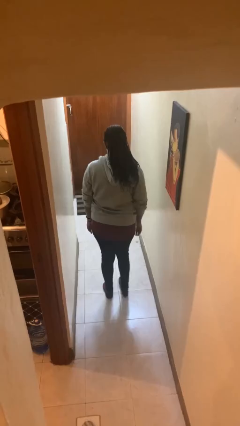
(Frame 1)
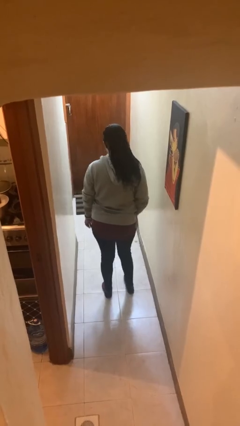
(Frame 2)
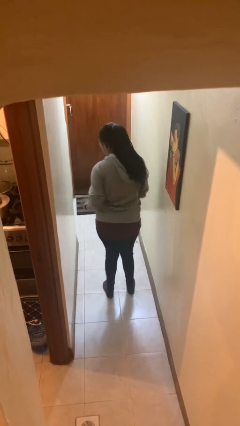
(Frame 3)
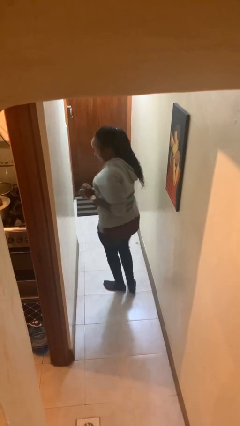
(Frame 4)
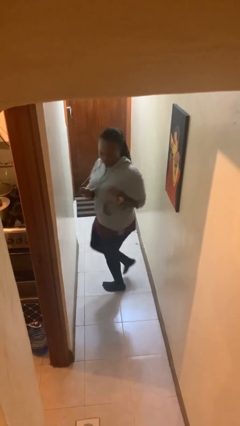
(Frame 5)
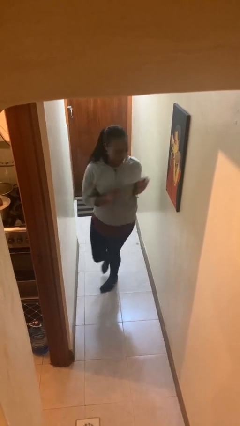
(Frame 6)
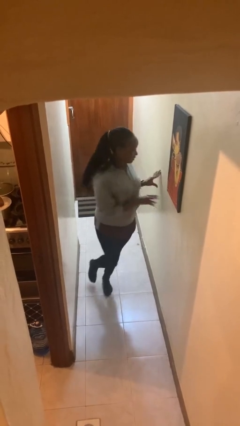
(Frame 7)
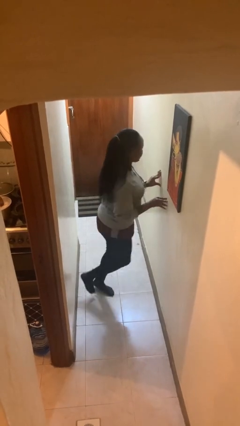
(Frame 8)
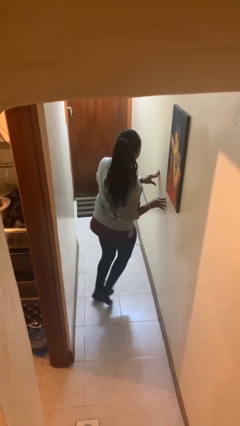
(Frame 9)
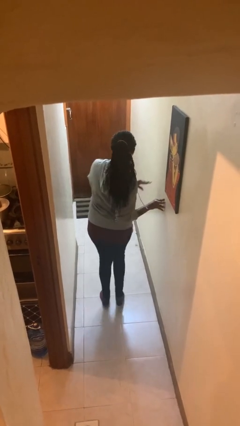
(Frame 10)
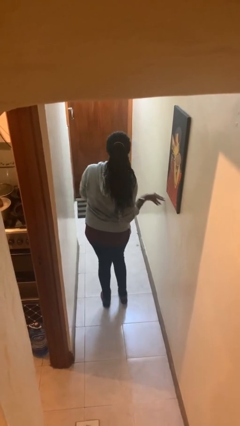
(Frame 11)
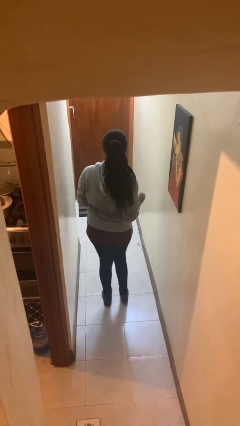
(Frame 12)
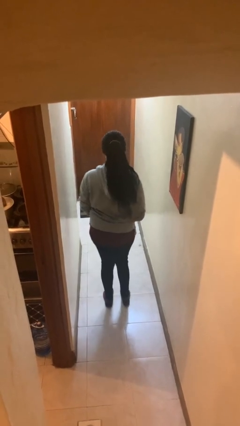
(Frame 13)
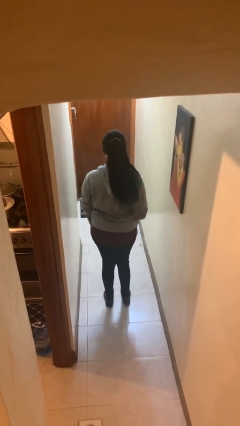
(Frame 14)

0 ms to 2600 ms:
person twirls

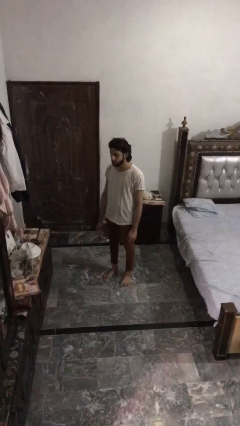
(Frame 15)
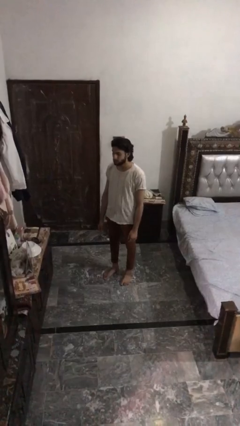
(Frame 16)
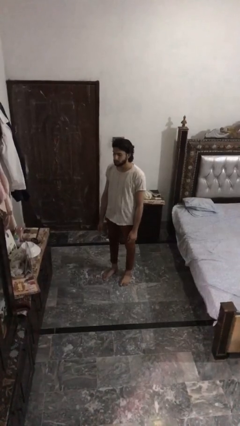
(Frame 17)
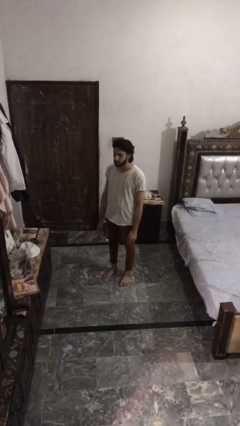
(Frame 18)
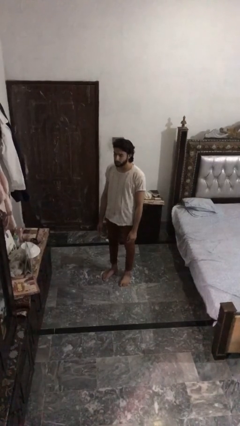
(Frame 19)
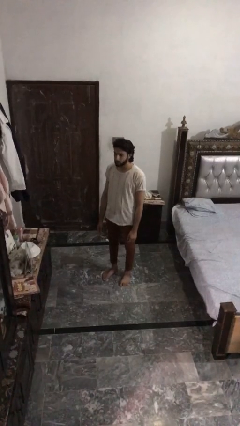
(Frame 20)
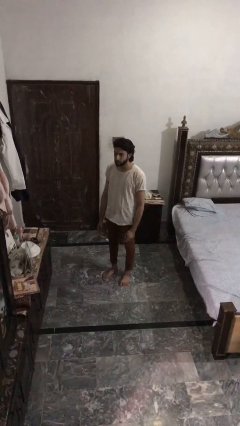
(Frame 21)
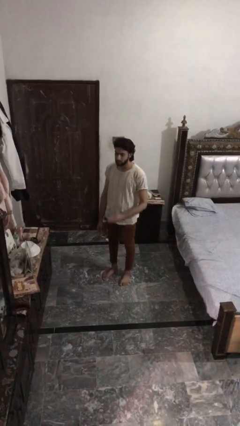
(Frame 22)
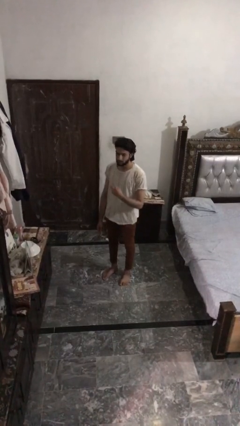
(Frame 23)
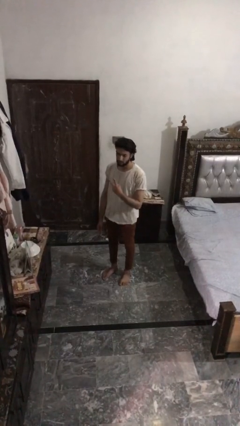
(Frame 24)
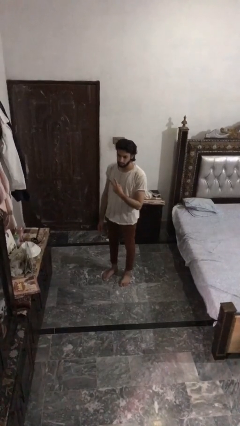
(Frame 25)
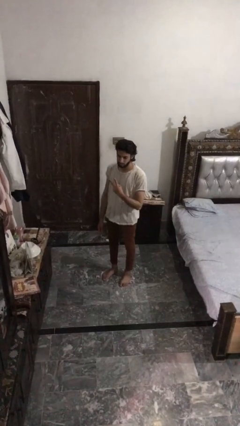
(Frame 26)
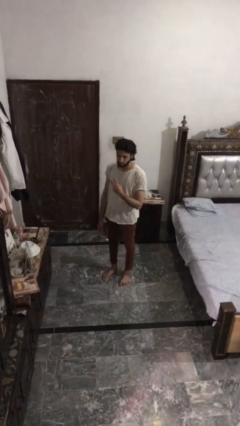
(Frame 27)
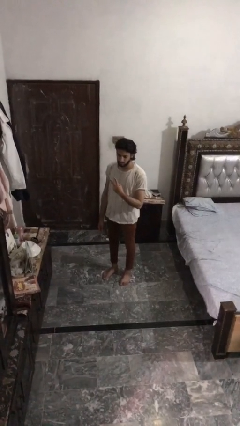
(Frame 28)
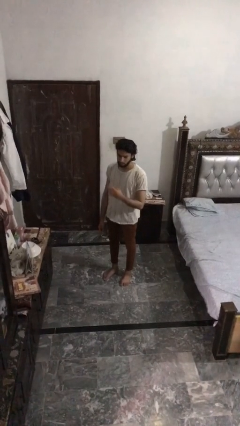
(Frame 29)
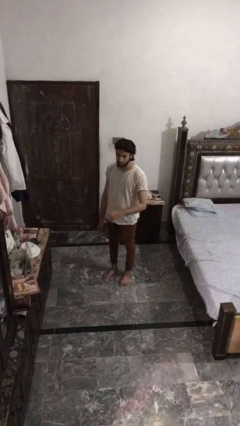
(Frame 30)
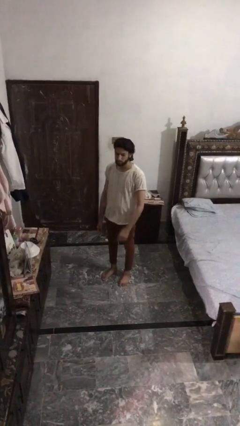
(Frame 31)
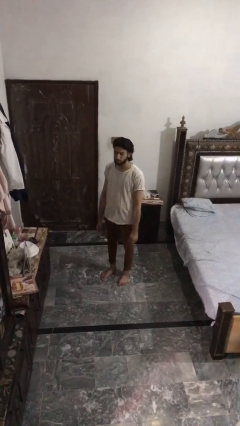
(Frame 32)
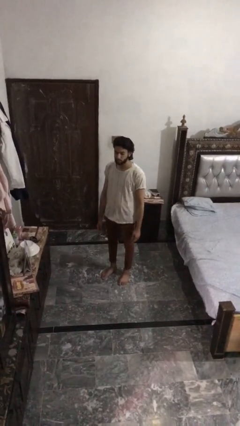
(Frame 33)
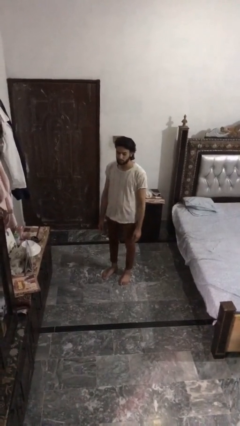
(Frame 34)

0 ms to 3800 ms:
person gestures peace

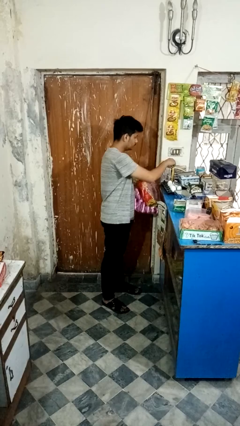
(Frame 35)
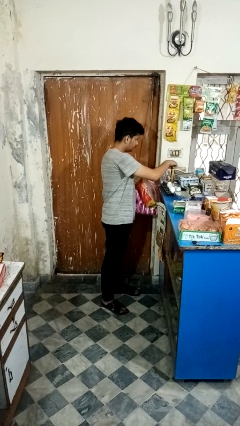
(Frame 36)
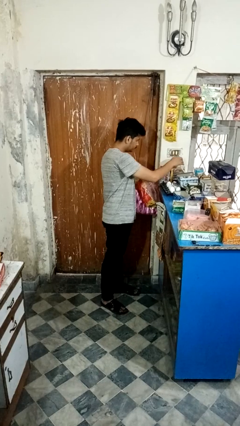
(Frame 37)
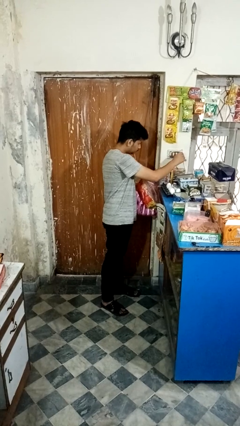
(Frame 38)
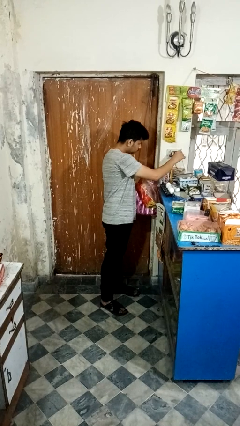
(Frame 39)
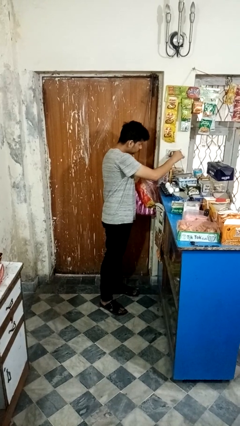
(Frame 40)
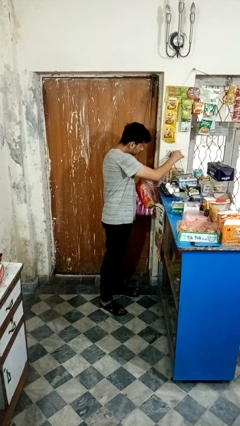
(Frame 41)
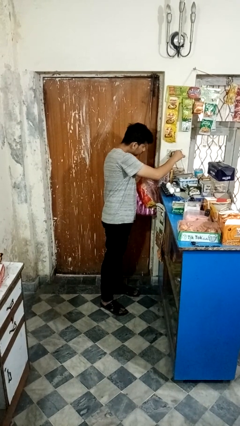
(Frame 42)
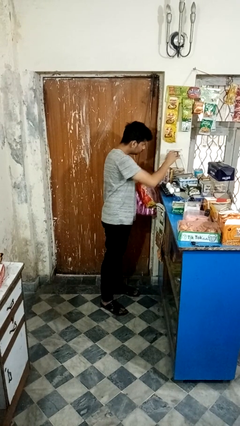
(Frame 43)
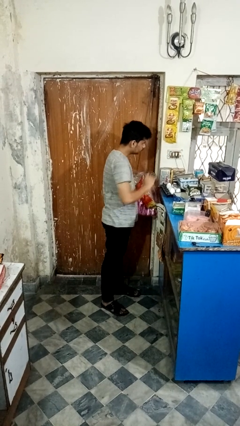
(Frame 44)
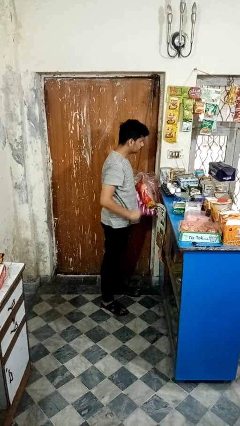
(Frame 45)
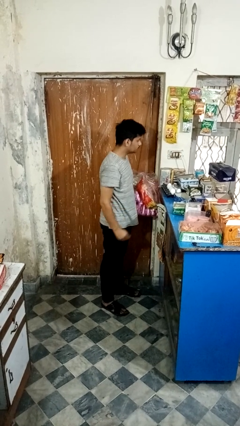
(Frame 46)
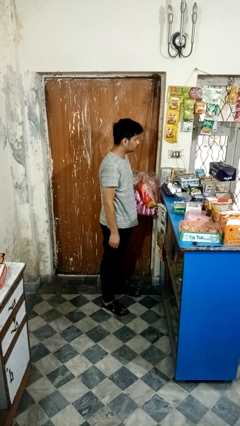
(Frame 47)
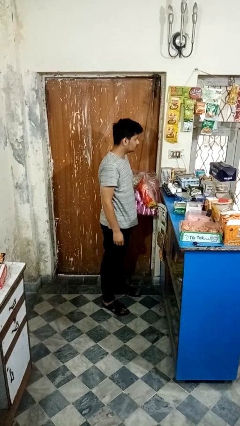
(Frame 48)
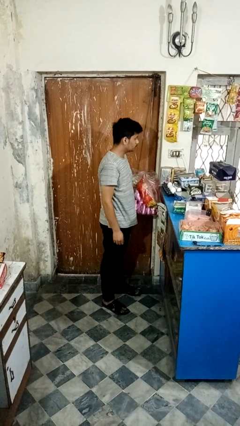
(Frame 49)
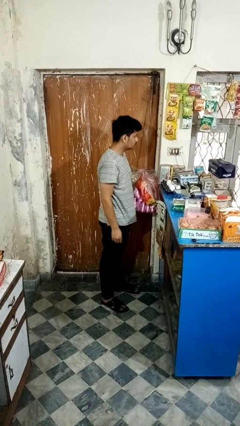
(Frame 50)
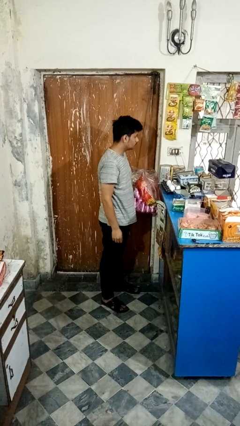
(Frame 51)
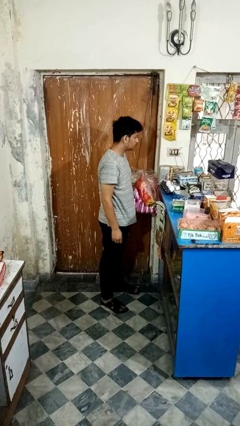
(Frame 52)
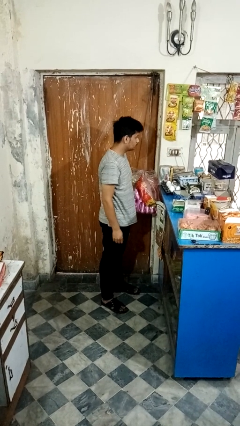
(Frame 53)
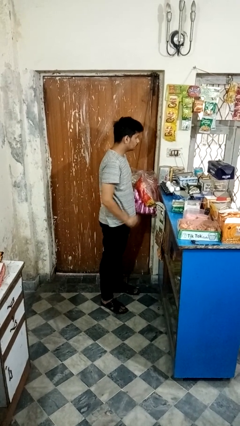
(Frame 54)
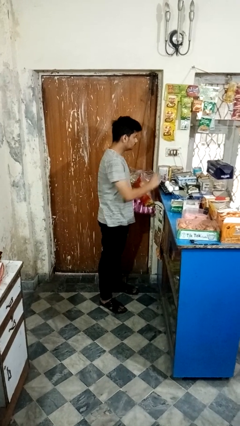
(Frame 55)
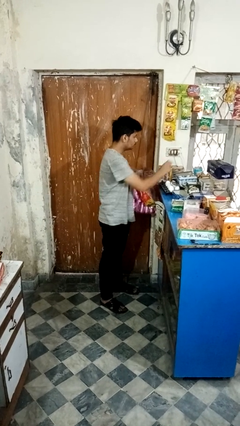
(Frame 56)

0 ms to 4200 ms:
person plugs into electrical socket

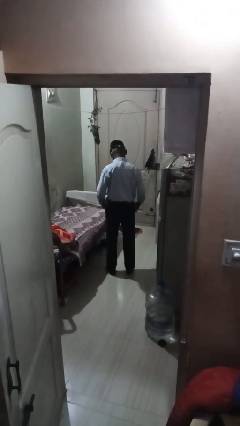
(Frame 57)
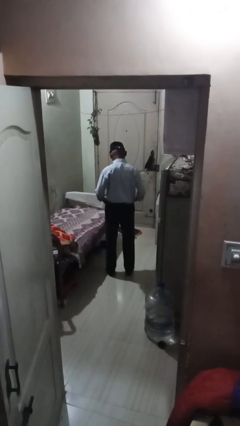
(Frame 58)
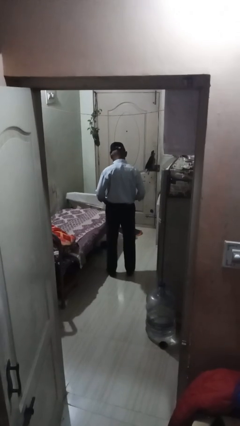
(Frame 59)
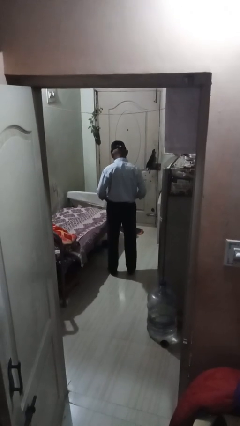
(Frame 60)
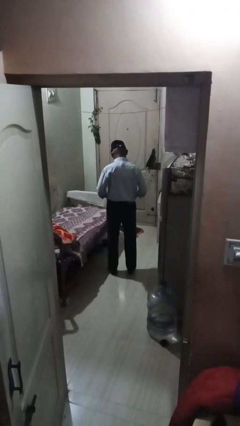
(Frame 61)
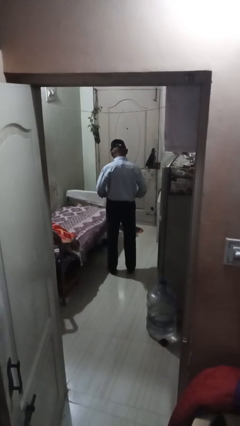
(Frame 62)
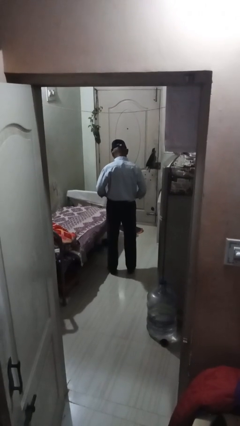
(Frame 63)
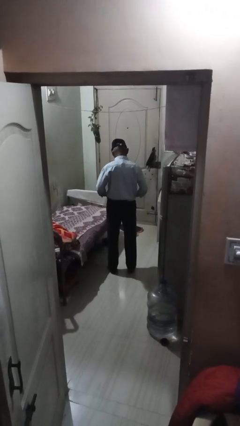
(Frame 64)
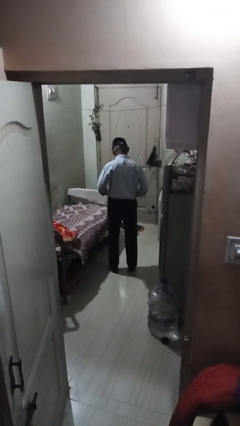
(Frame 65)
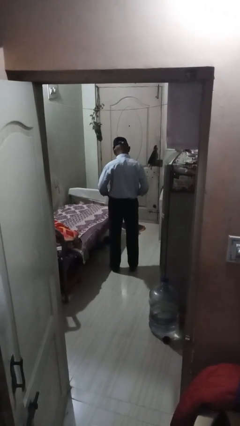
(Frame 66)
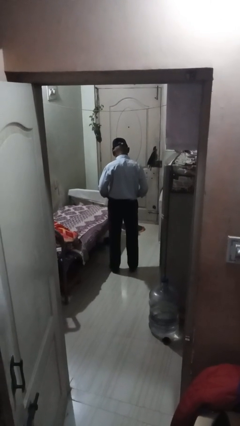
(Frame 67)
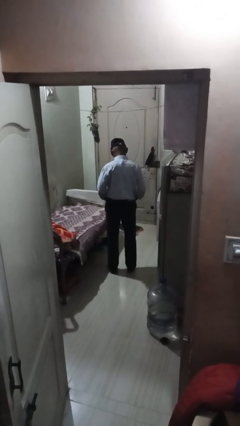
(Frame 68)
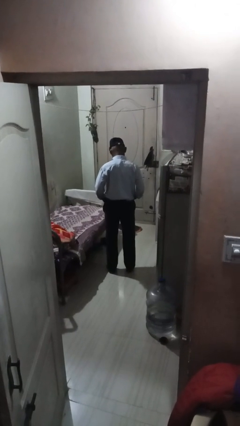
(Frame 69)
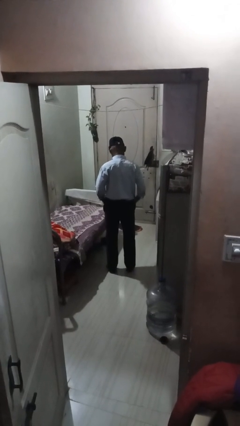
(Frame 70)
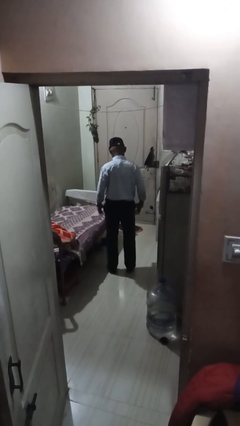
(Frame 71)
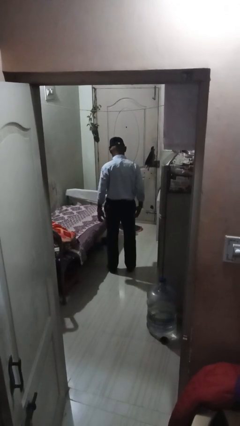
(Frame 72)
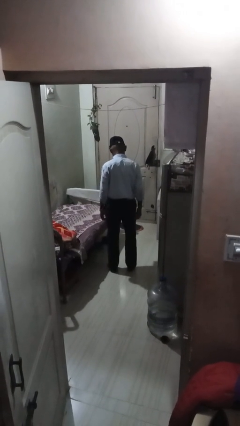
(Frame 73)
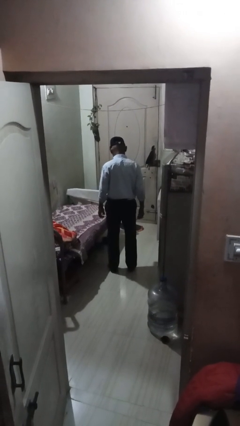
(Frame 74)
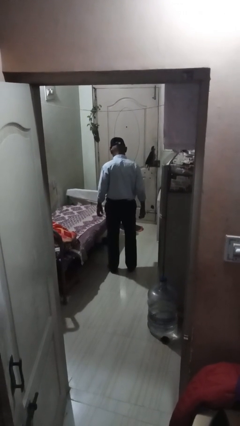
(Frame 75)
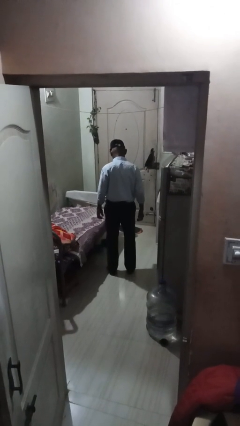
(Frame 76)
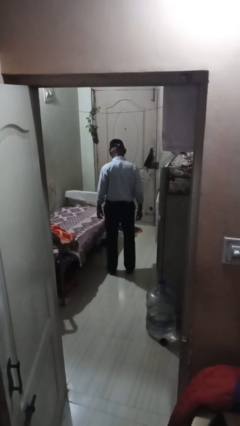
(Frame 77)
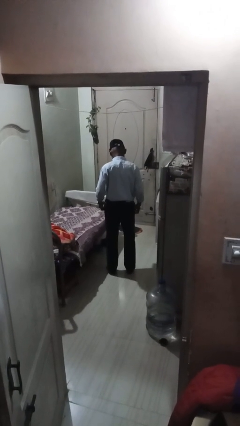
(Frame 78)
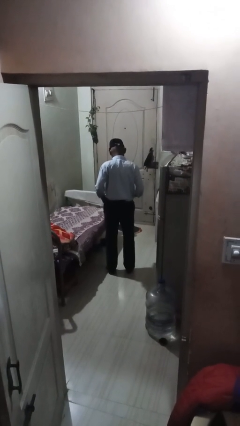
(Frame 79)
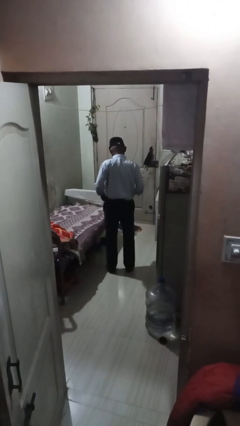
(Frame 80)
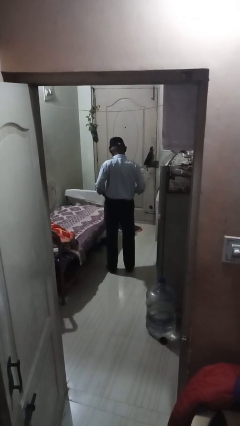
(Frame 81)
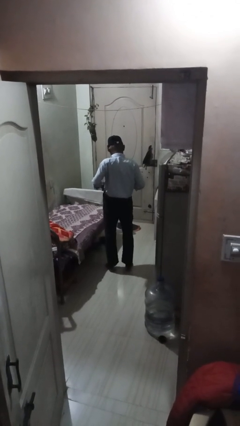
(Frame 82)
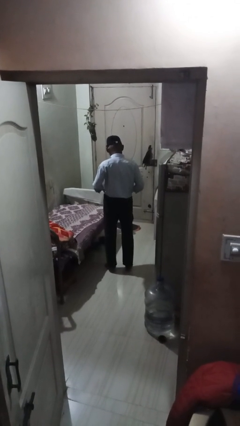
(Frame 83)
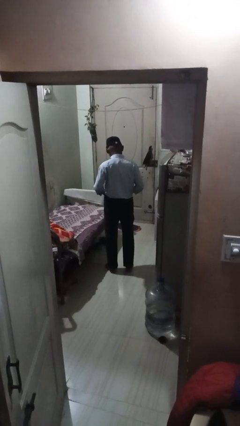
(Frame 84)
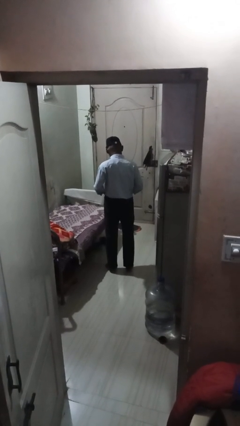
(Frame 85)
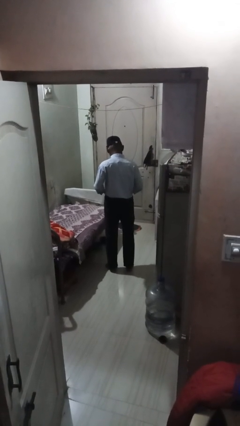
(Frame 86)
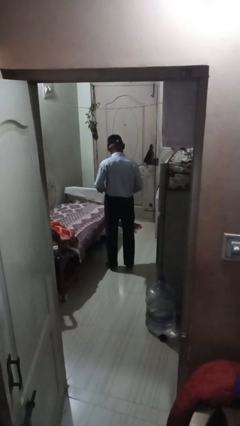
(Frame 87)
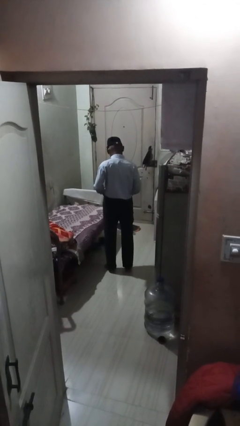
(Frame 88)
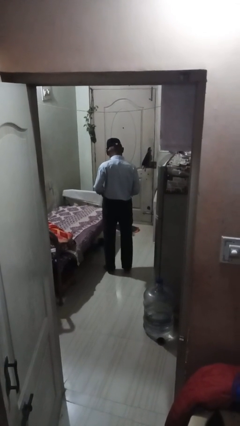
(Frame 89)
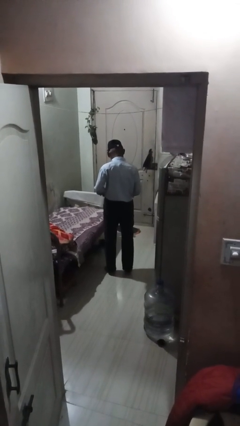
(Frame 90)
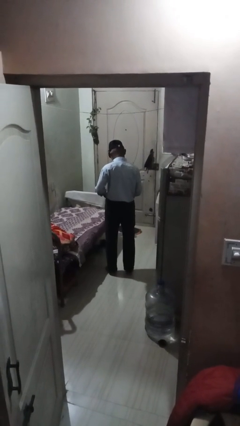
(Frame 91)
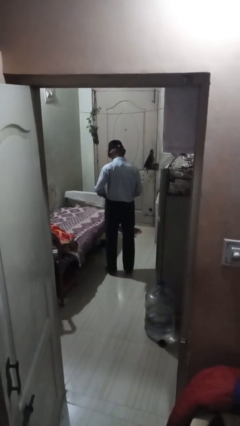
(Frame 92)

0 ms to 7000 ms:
person hikes up pants

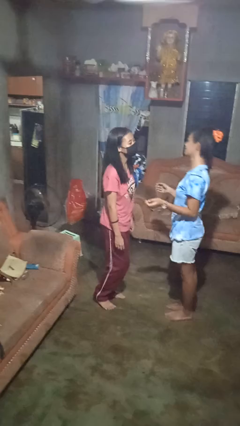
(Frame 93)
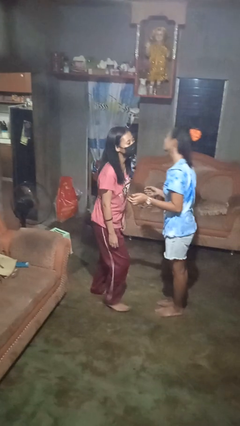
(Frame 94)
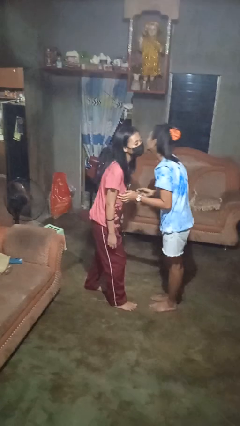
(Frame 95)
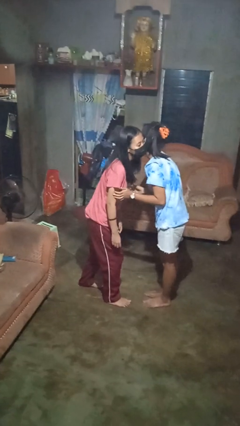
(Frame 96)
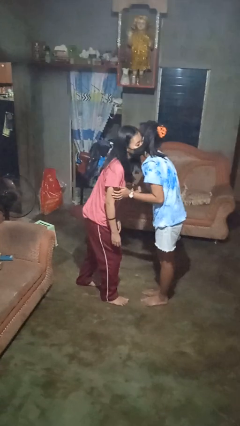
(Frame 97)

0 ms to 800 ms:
person kisses cheek of person
